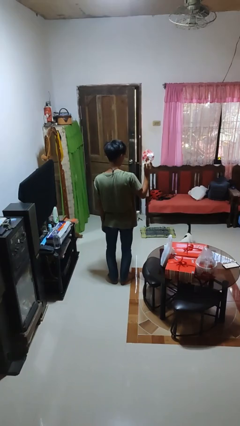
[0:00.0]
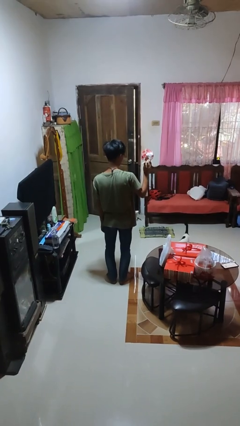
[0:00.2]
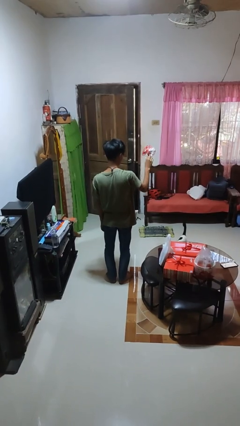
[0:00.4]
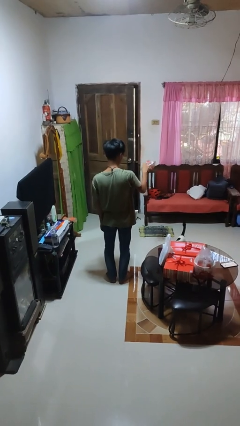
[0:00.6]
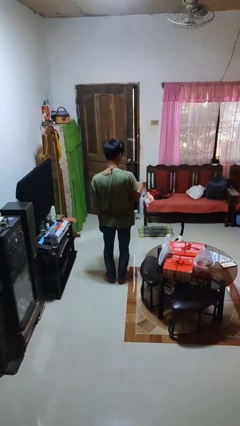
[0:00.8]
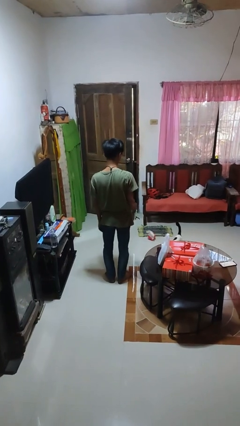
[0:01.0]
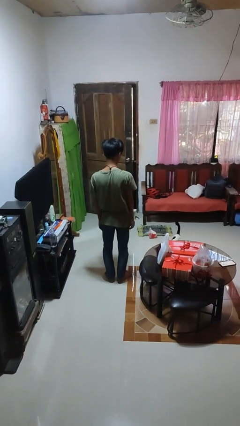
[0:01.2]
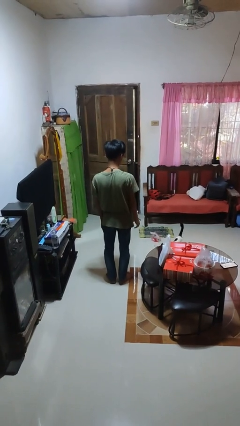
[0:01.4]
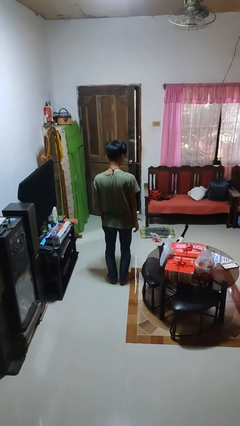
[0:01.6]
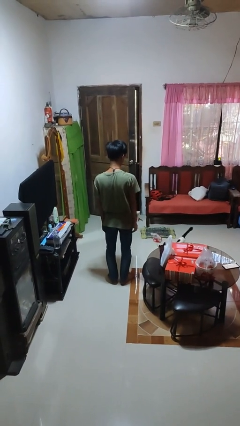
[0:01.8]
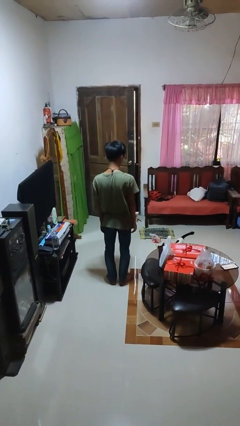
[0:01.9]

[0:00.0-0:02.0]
person throws object to ground

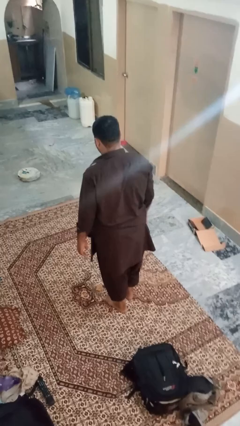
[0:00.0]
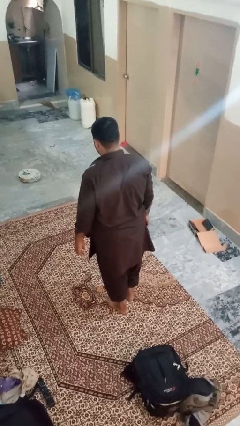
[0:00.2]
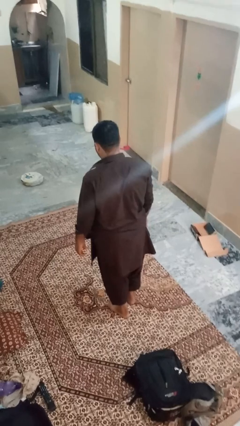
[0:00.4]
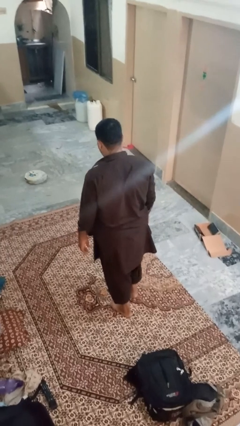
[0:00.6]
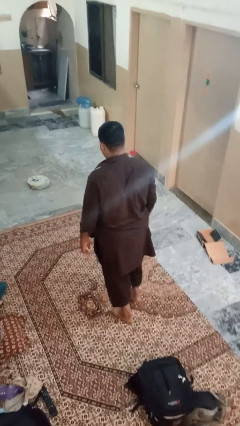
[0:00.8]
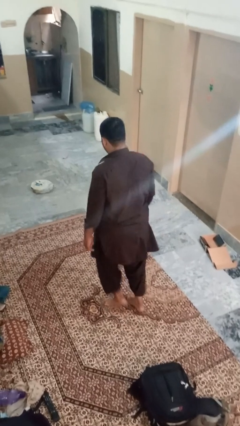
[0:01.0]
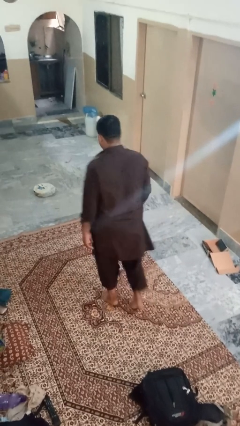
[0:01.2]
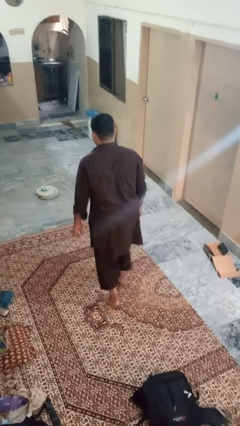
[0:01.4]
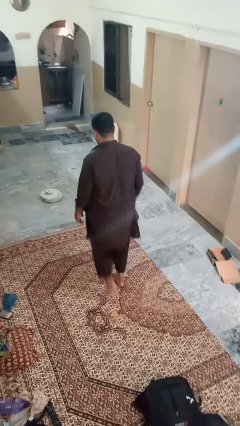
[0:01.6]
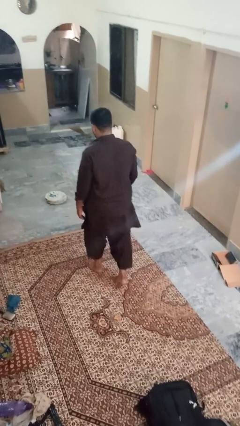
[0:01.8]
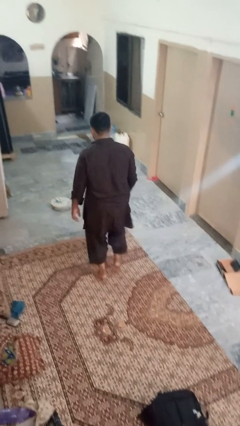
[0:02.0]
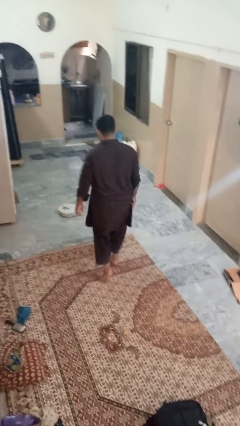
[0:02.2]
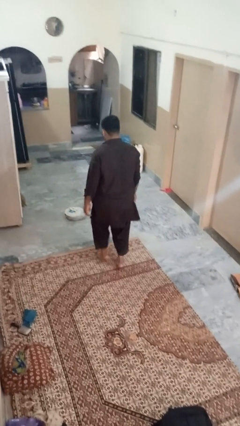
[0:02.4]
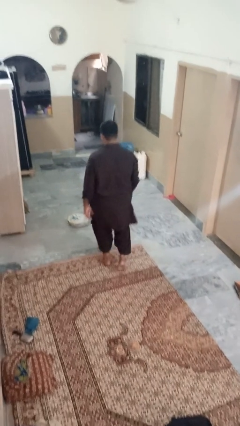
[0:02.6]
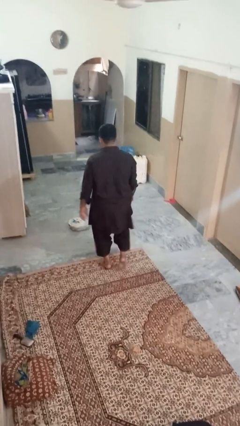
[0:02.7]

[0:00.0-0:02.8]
person walks tiptoe

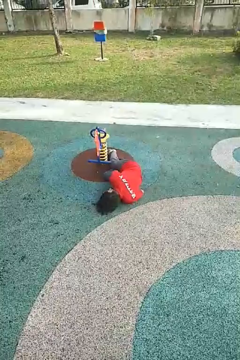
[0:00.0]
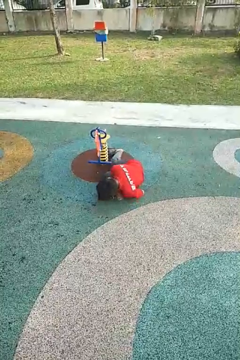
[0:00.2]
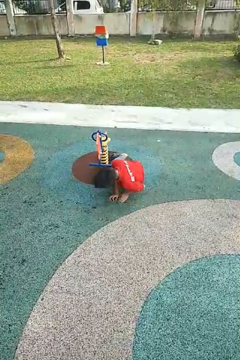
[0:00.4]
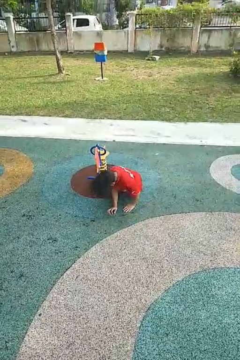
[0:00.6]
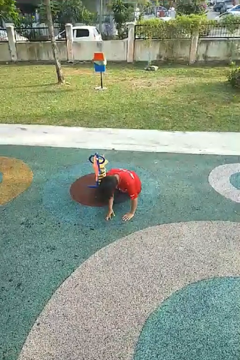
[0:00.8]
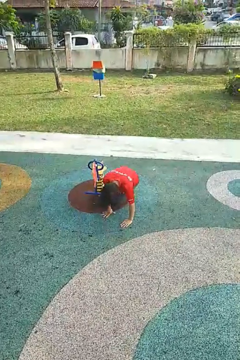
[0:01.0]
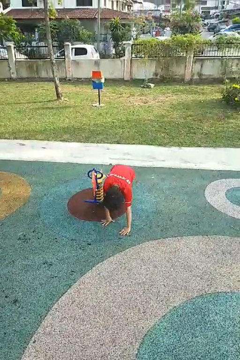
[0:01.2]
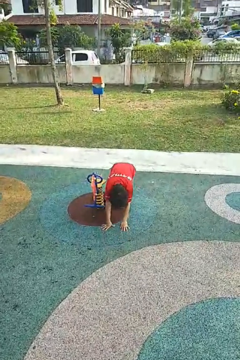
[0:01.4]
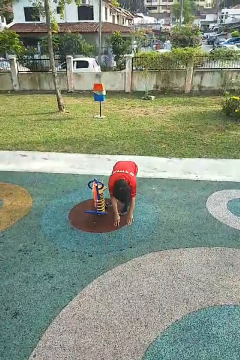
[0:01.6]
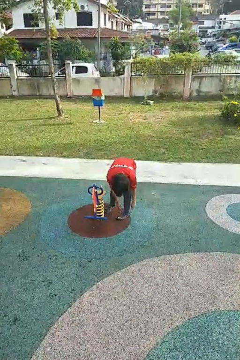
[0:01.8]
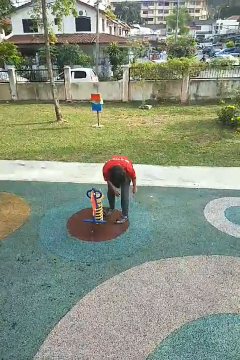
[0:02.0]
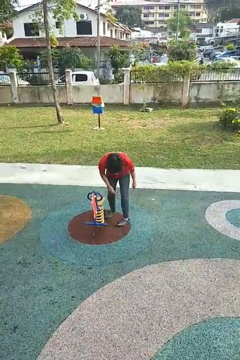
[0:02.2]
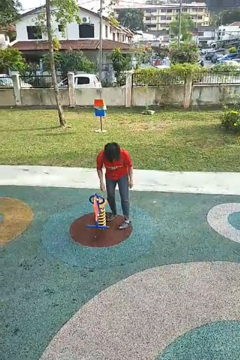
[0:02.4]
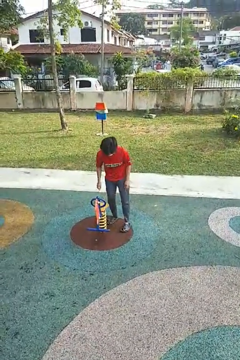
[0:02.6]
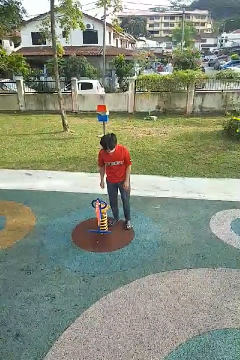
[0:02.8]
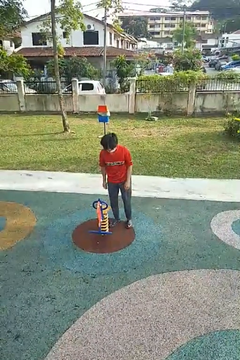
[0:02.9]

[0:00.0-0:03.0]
person stands up from floor

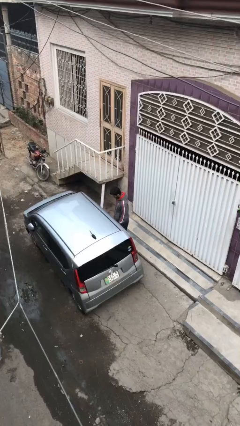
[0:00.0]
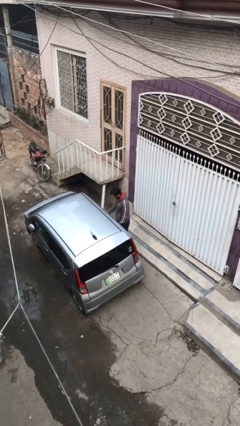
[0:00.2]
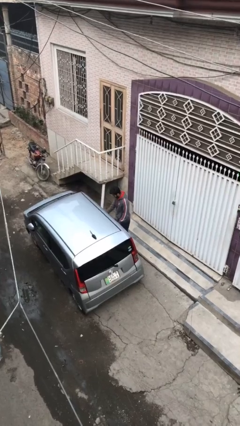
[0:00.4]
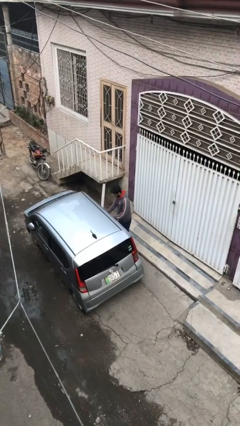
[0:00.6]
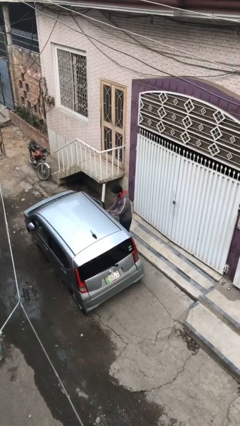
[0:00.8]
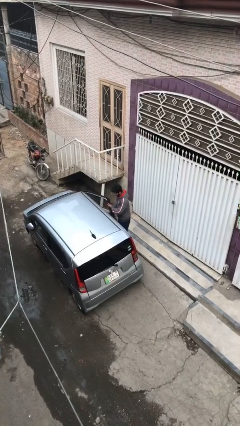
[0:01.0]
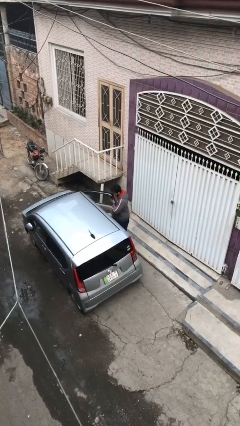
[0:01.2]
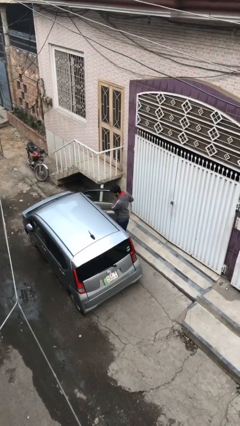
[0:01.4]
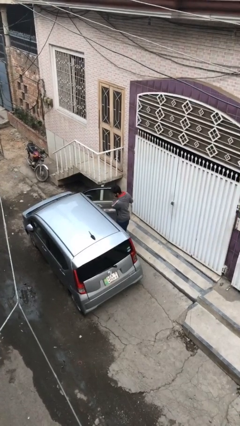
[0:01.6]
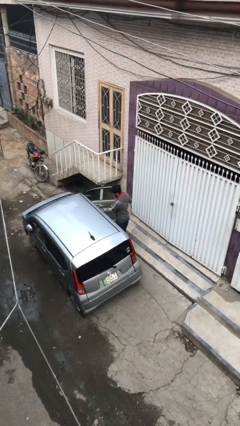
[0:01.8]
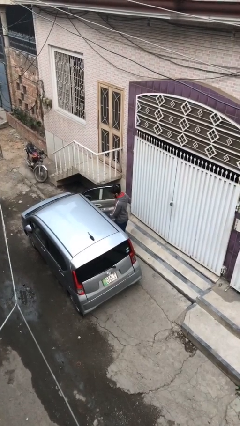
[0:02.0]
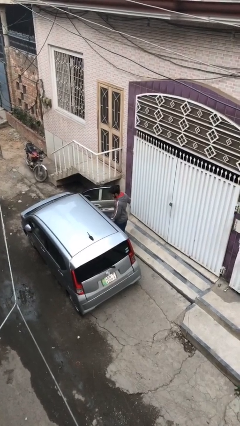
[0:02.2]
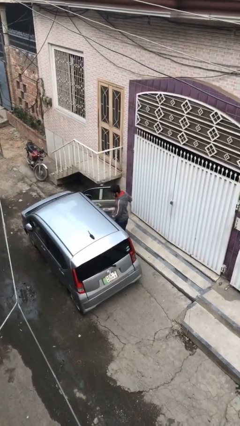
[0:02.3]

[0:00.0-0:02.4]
person opens car door

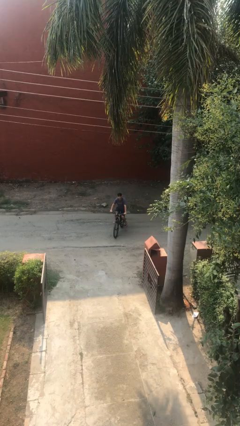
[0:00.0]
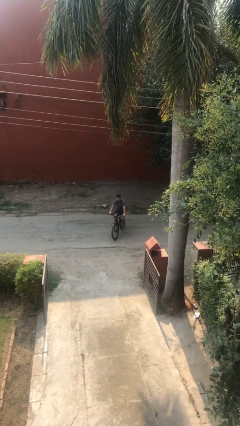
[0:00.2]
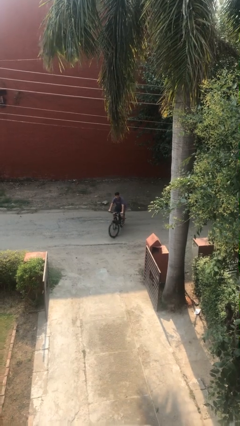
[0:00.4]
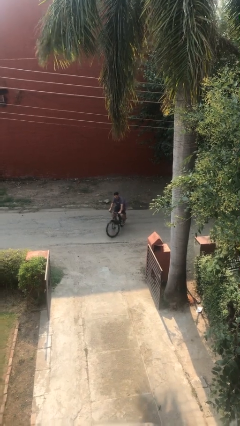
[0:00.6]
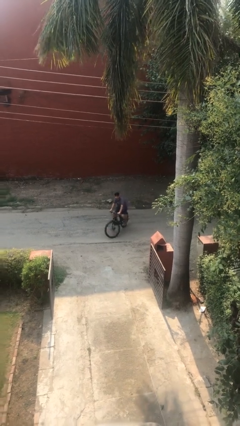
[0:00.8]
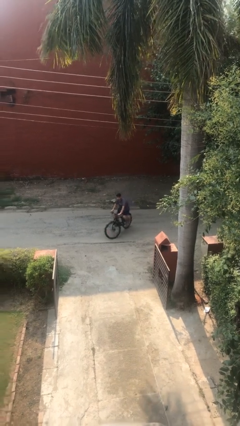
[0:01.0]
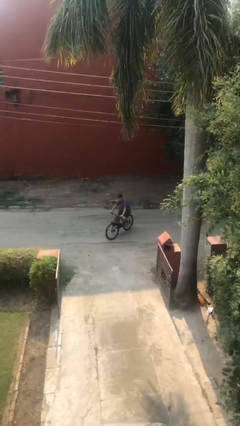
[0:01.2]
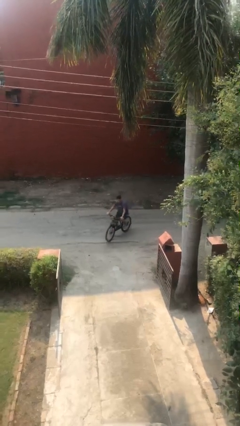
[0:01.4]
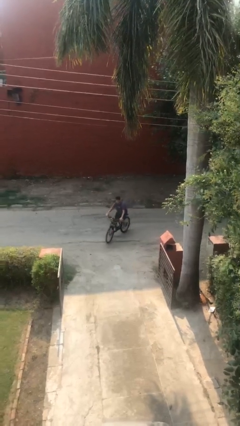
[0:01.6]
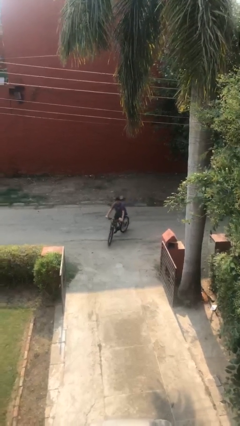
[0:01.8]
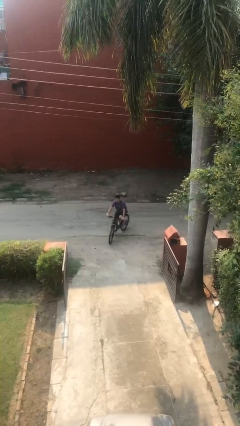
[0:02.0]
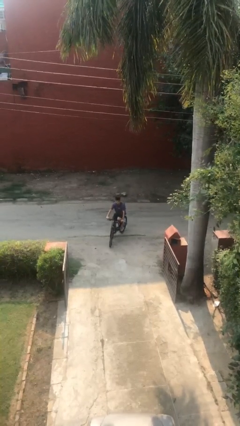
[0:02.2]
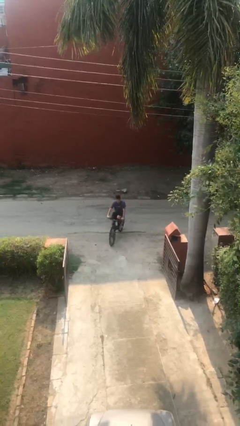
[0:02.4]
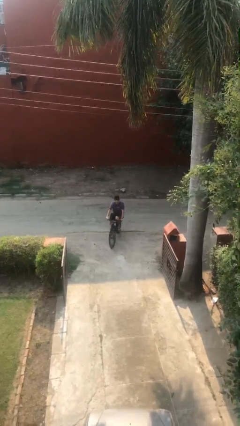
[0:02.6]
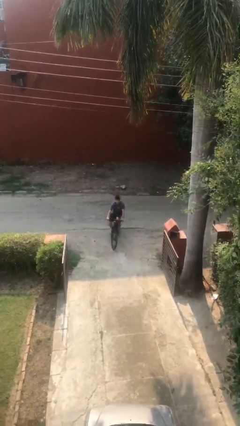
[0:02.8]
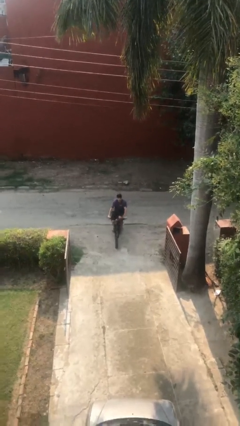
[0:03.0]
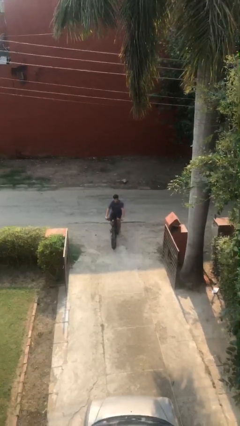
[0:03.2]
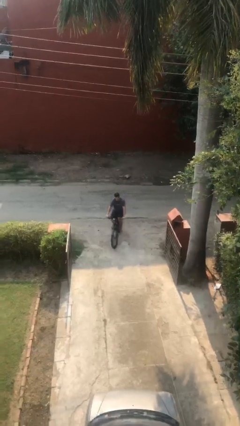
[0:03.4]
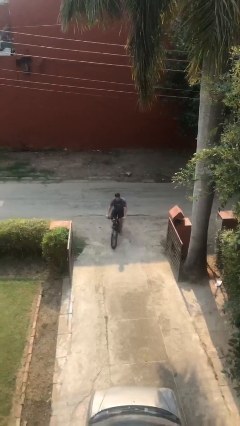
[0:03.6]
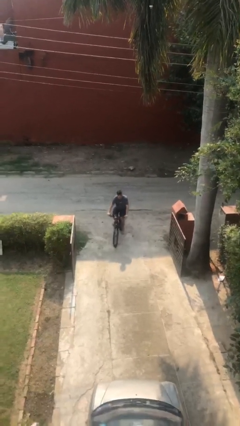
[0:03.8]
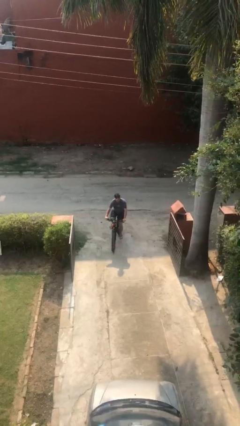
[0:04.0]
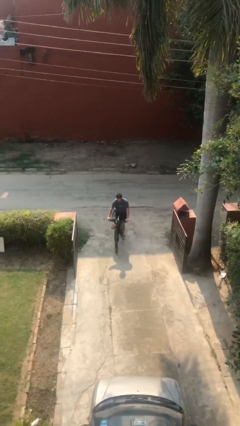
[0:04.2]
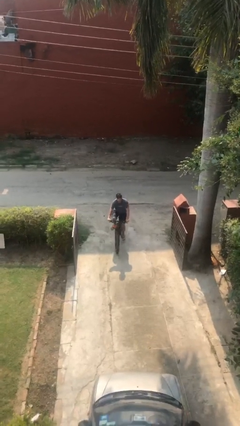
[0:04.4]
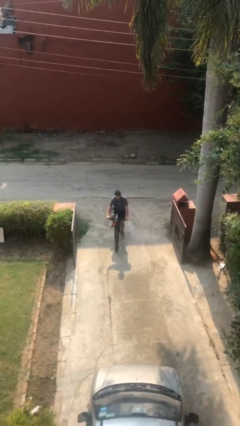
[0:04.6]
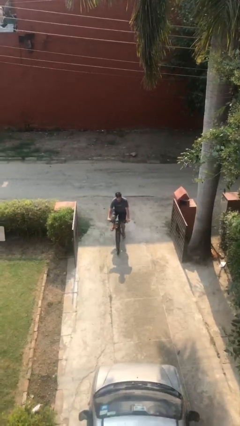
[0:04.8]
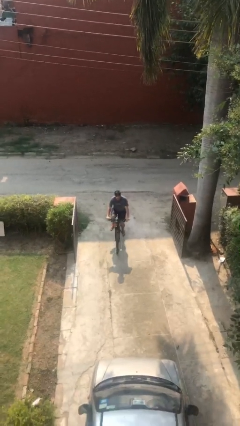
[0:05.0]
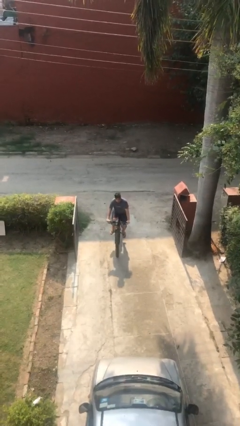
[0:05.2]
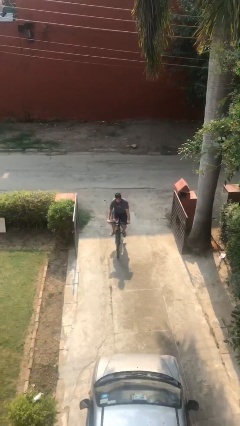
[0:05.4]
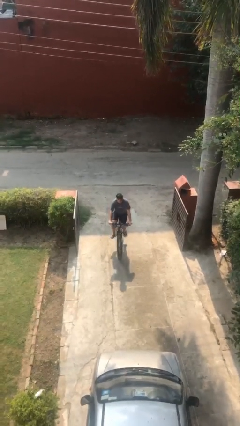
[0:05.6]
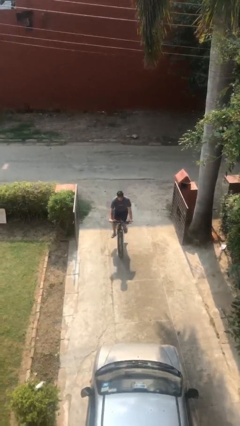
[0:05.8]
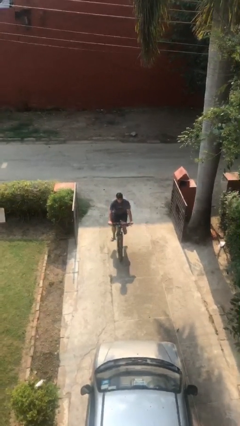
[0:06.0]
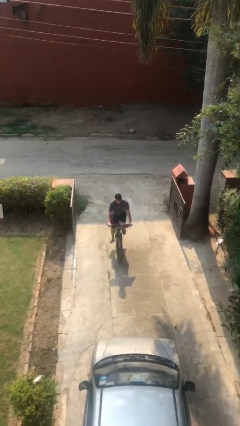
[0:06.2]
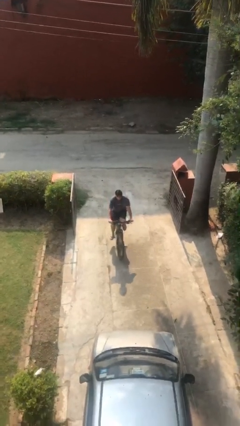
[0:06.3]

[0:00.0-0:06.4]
person rides bicycle

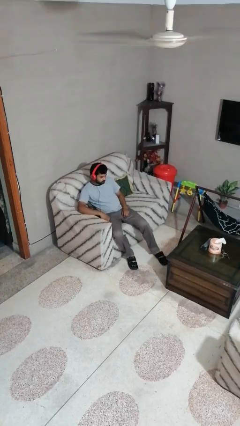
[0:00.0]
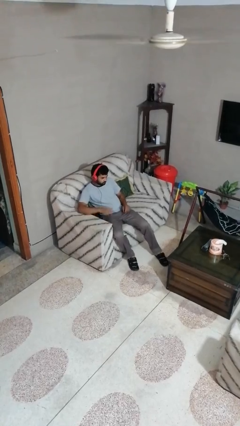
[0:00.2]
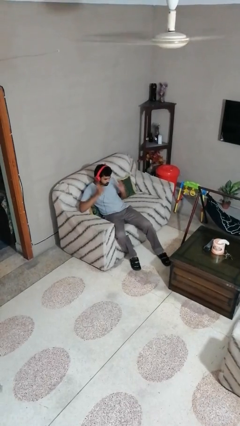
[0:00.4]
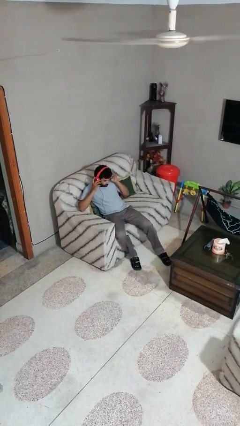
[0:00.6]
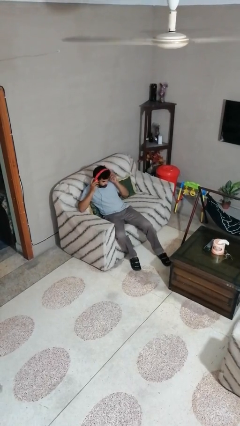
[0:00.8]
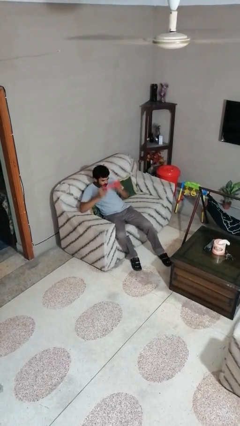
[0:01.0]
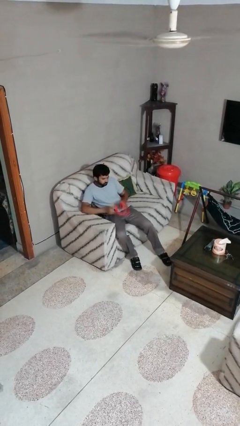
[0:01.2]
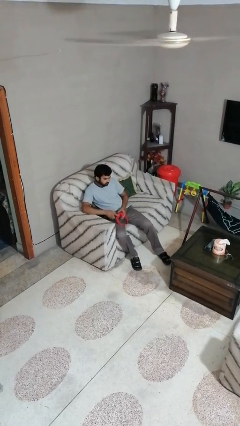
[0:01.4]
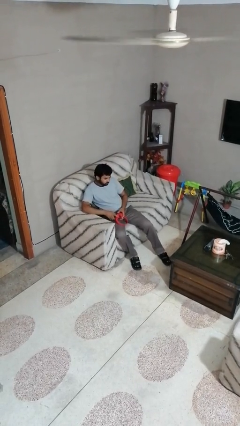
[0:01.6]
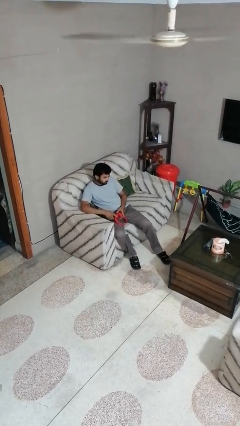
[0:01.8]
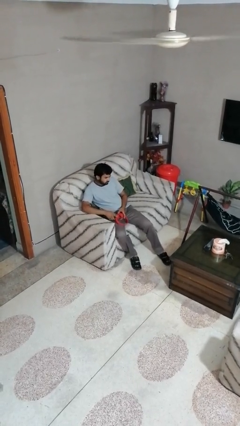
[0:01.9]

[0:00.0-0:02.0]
person takes off headphones
